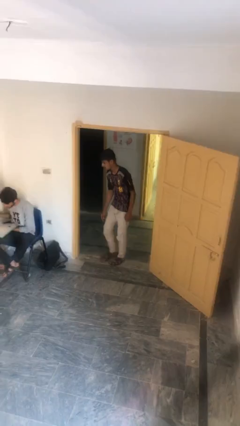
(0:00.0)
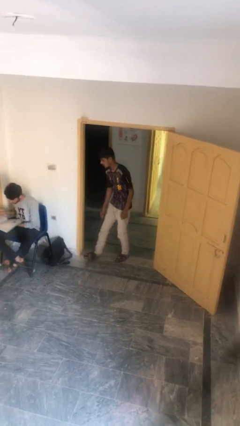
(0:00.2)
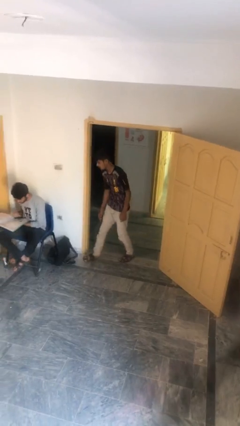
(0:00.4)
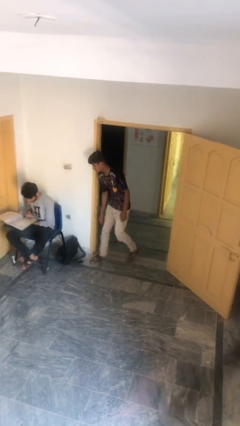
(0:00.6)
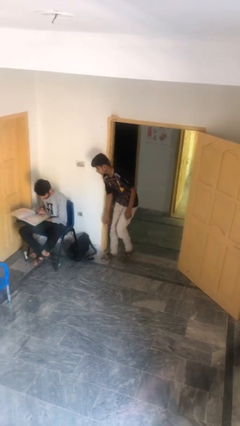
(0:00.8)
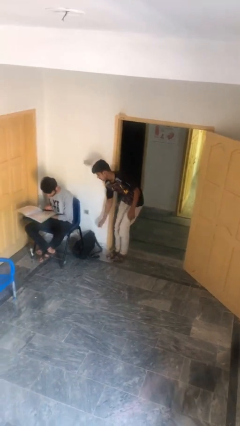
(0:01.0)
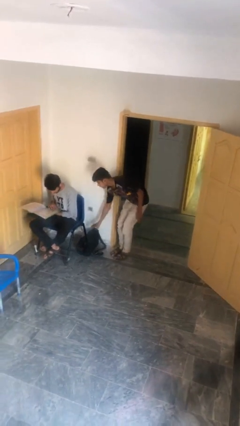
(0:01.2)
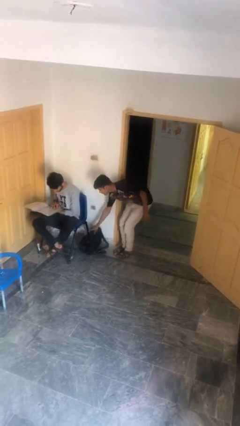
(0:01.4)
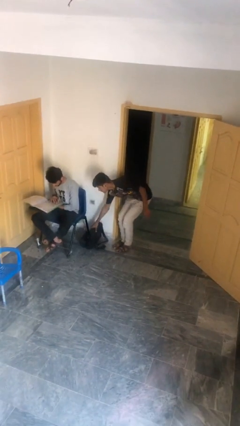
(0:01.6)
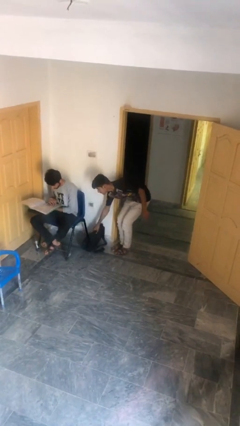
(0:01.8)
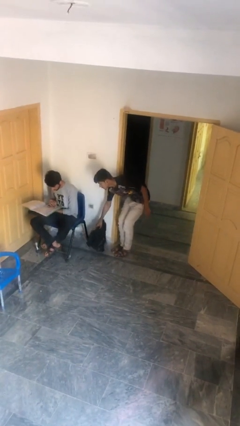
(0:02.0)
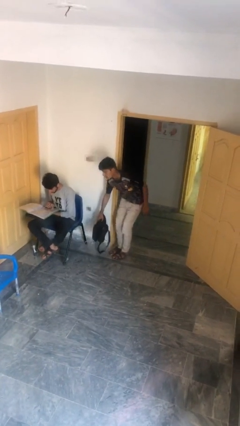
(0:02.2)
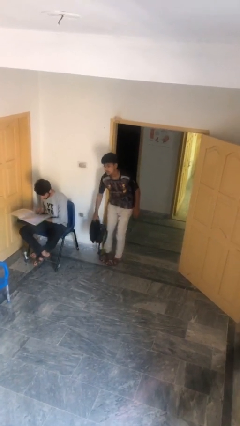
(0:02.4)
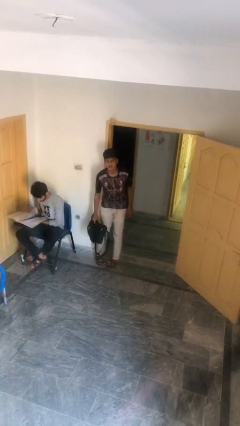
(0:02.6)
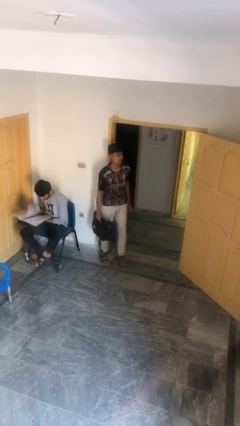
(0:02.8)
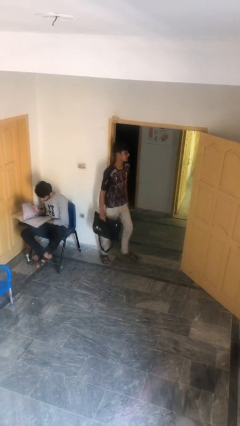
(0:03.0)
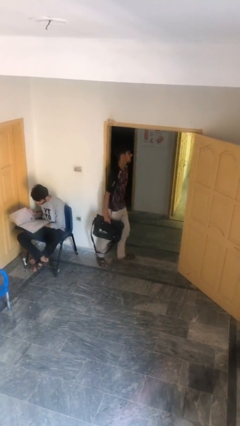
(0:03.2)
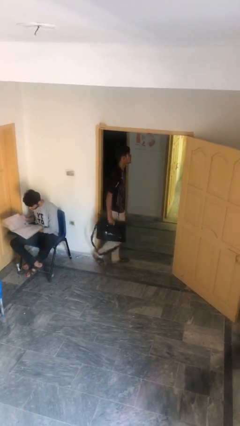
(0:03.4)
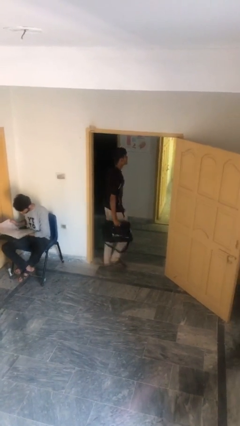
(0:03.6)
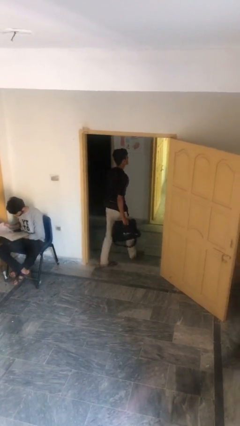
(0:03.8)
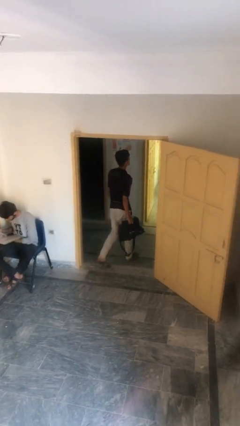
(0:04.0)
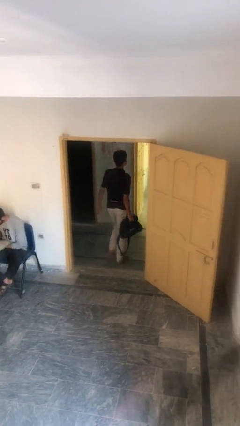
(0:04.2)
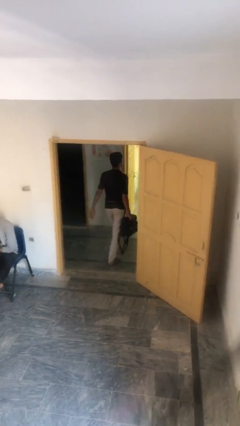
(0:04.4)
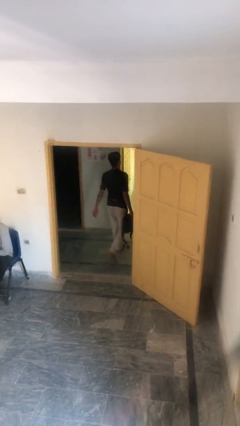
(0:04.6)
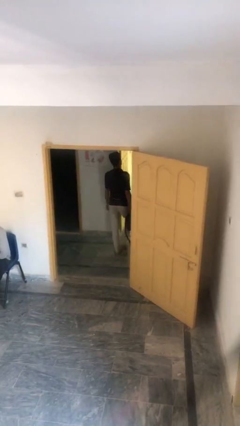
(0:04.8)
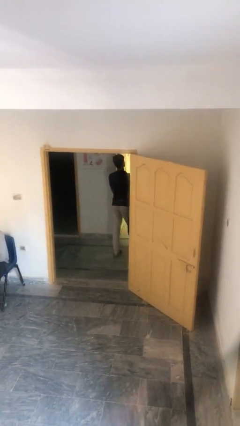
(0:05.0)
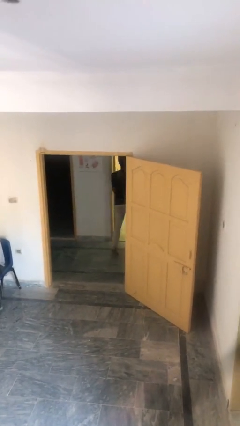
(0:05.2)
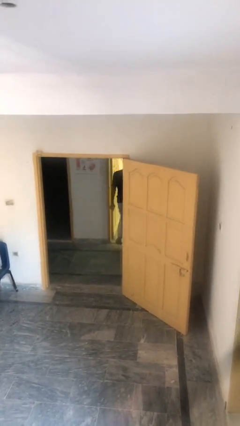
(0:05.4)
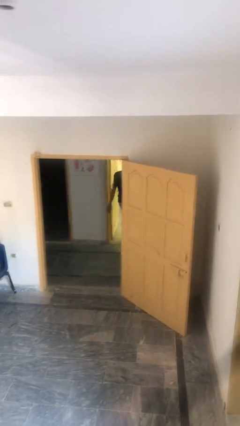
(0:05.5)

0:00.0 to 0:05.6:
person steals object from person

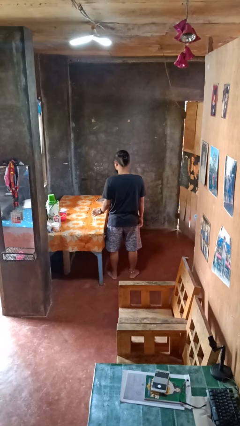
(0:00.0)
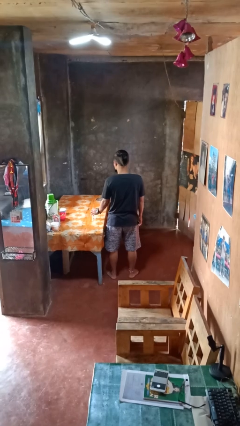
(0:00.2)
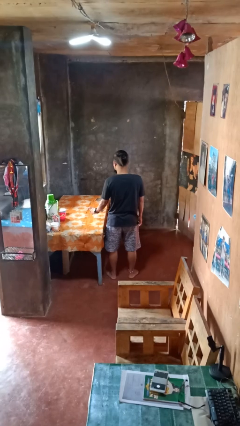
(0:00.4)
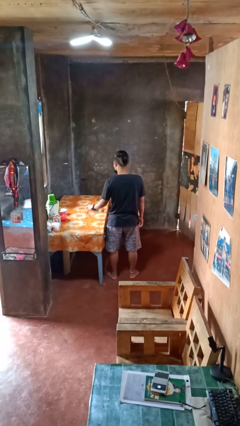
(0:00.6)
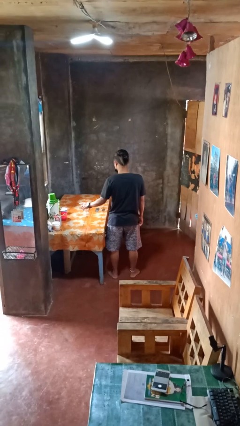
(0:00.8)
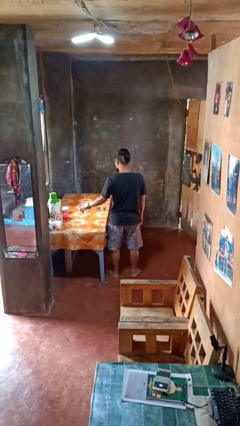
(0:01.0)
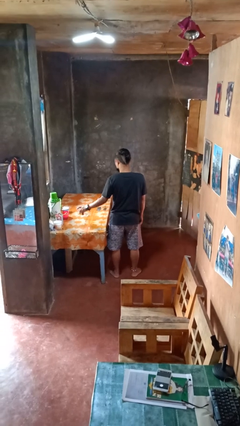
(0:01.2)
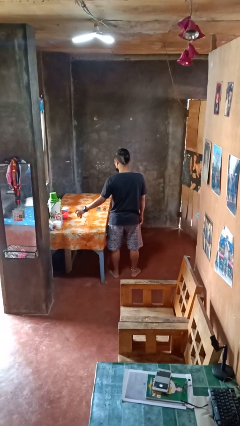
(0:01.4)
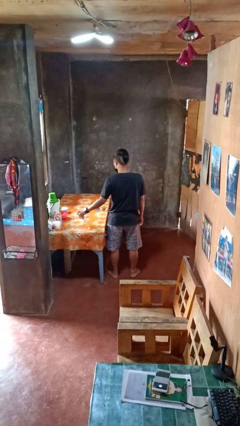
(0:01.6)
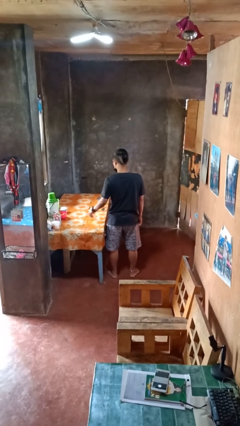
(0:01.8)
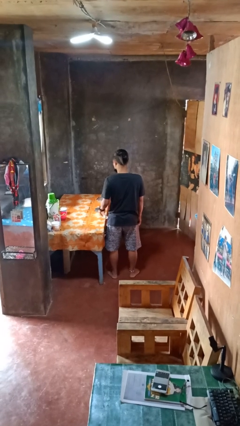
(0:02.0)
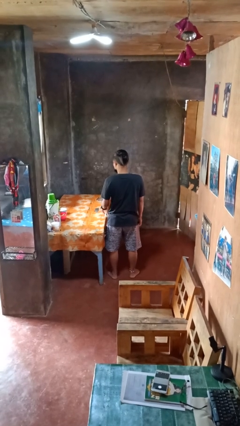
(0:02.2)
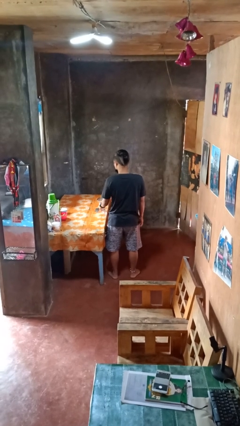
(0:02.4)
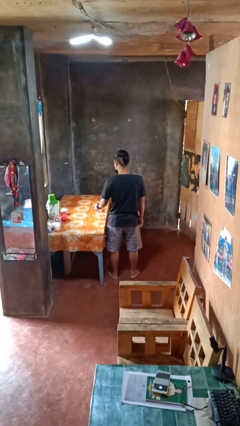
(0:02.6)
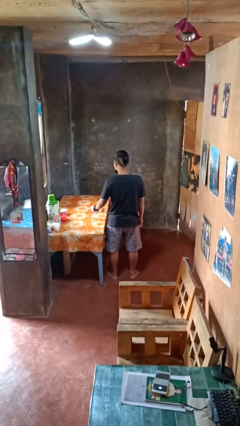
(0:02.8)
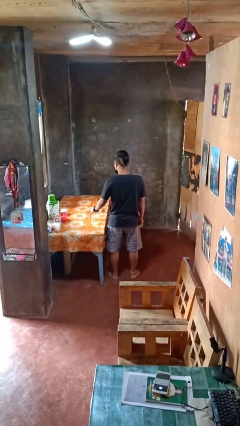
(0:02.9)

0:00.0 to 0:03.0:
person sprays from bottle

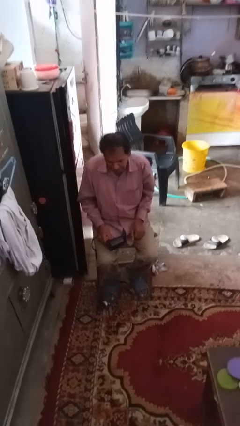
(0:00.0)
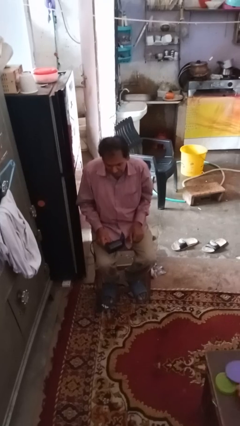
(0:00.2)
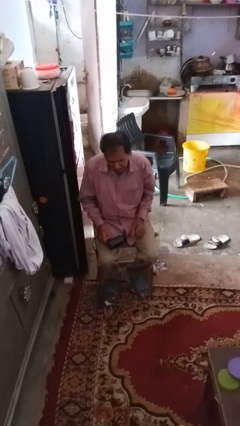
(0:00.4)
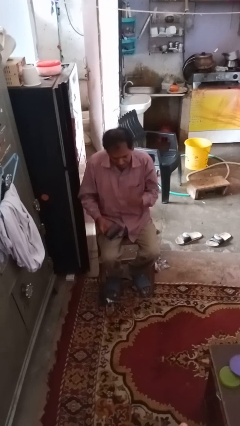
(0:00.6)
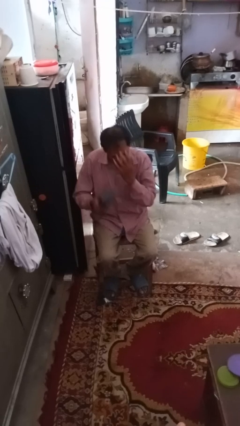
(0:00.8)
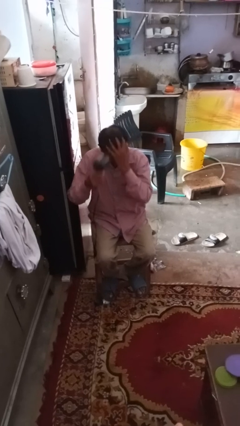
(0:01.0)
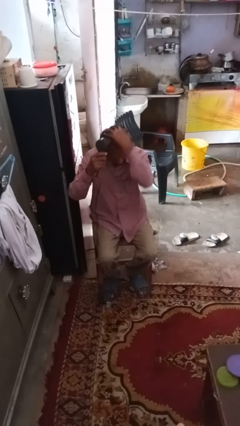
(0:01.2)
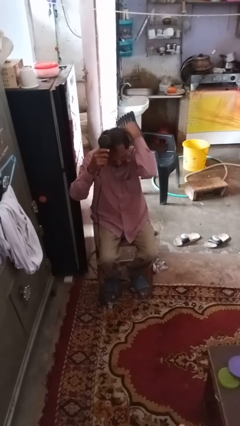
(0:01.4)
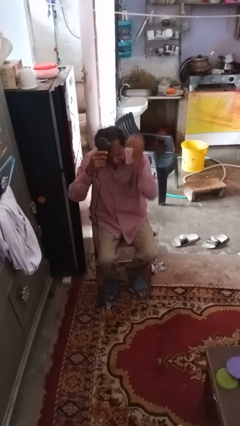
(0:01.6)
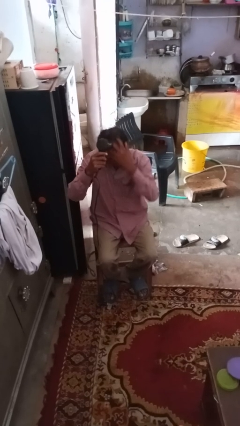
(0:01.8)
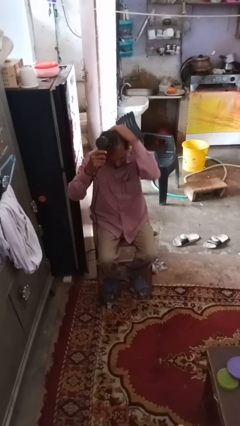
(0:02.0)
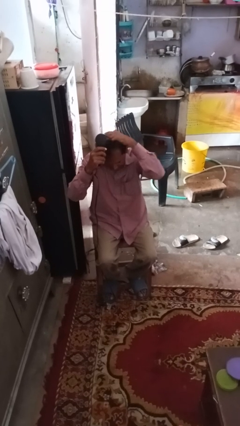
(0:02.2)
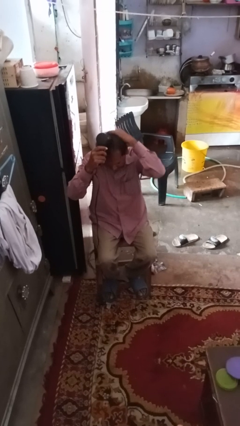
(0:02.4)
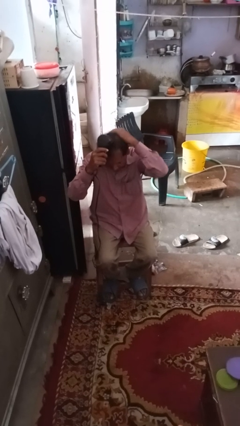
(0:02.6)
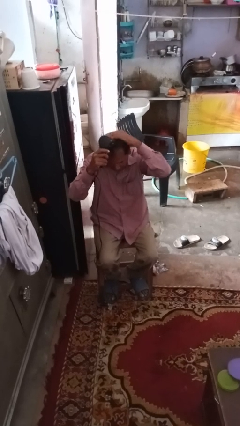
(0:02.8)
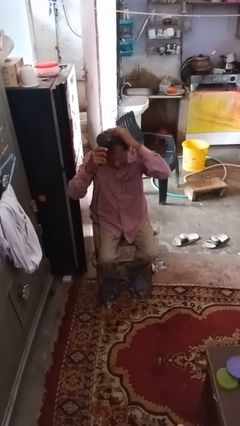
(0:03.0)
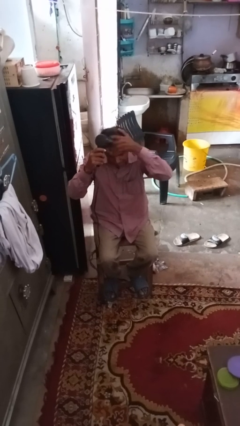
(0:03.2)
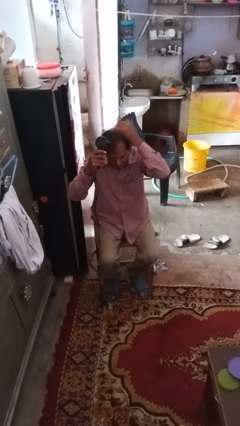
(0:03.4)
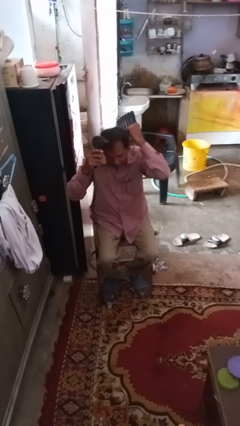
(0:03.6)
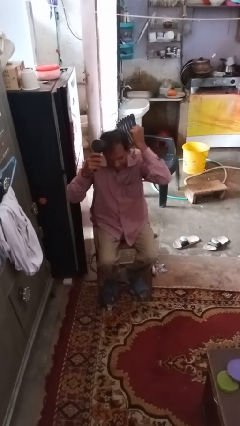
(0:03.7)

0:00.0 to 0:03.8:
person dries hair with hairdryer

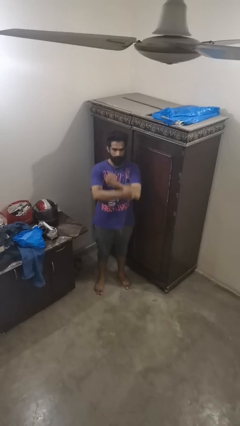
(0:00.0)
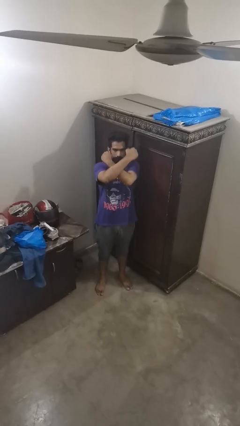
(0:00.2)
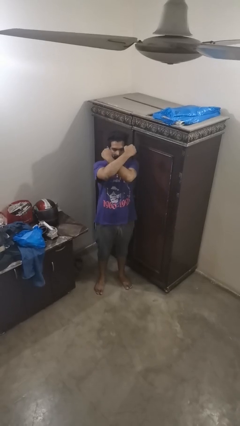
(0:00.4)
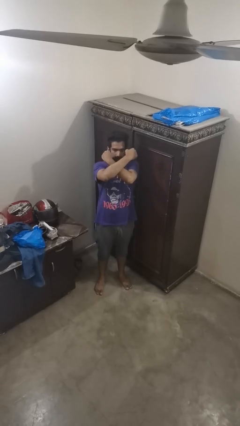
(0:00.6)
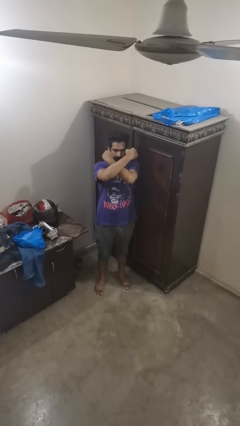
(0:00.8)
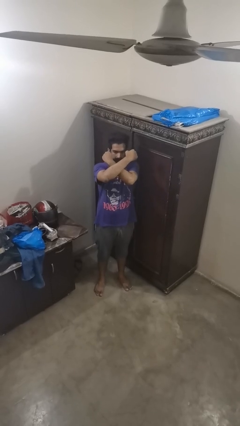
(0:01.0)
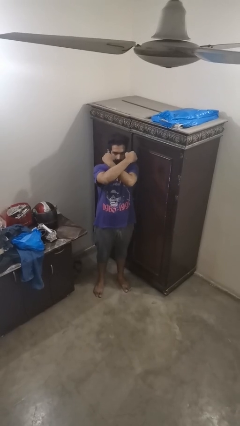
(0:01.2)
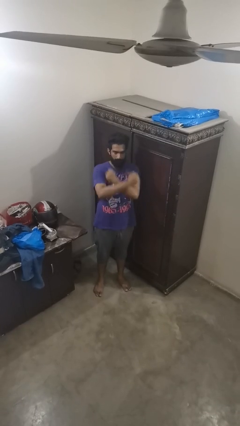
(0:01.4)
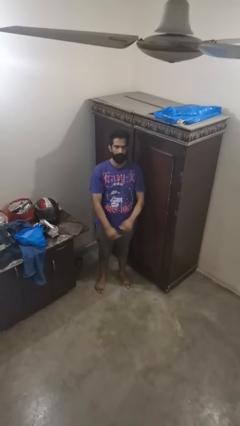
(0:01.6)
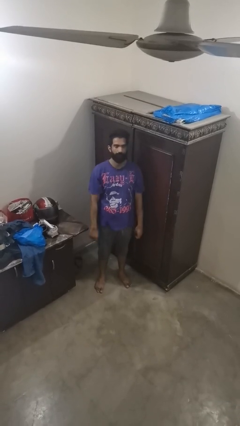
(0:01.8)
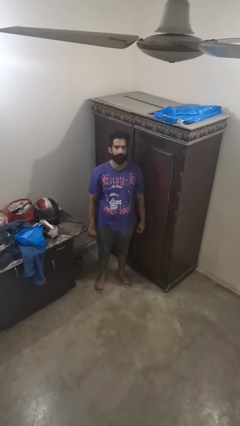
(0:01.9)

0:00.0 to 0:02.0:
person gestures arms x

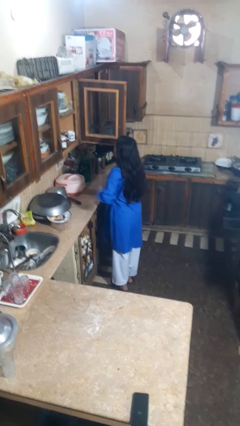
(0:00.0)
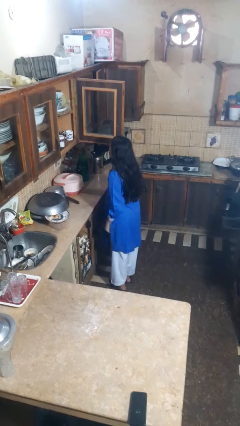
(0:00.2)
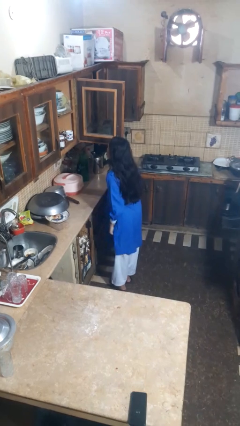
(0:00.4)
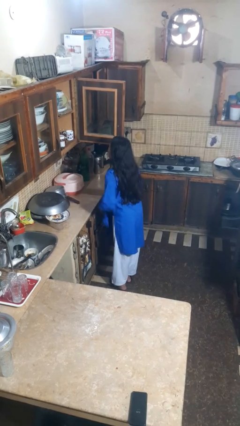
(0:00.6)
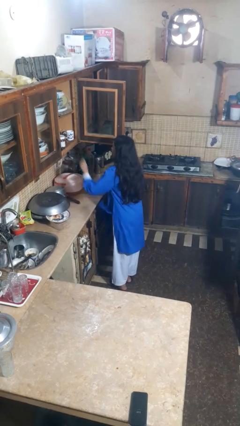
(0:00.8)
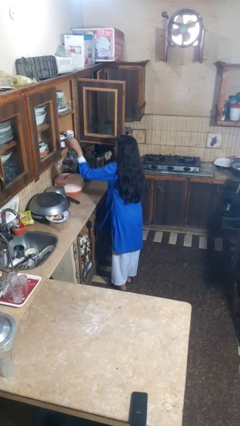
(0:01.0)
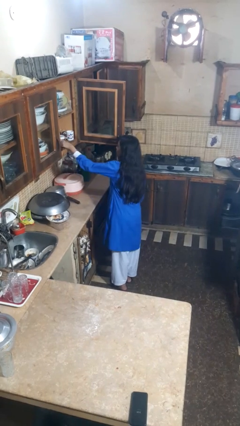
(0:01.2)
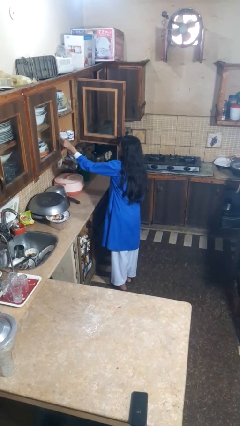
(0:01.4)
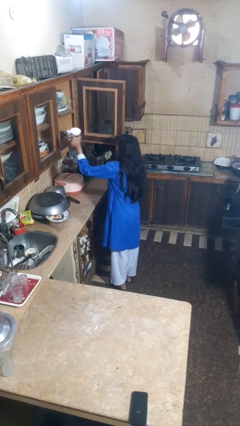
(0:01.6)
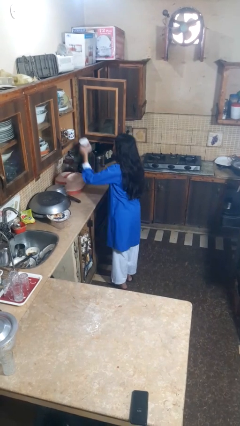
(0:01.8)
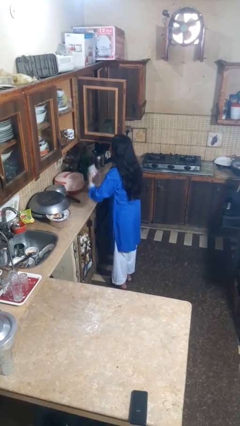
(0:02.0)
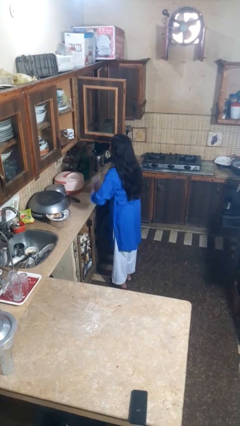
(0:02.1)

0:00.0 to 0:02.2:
person takes object from cabinet

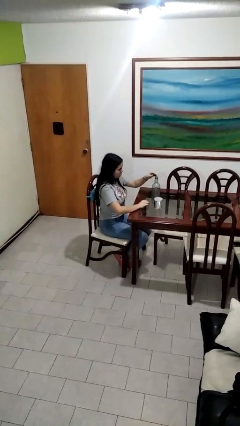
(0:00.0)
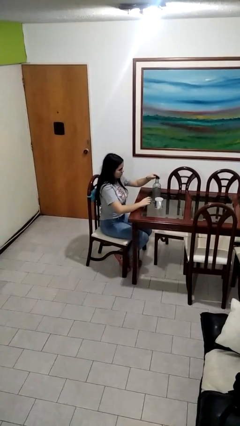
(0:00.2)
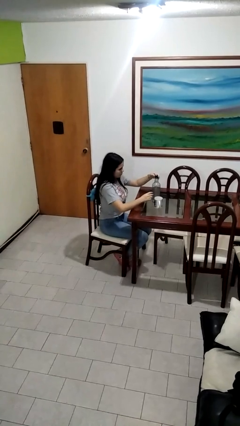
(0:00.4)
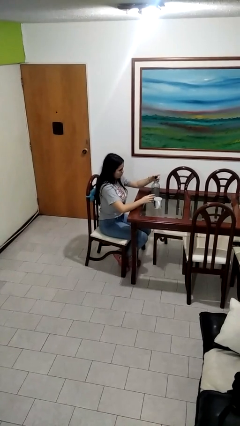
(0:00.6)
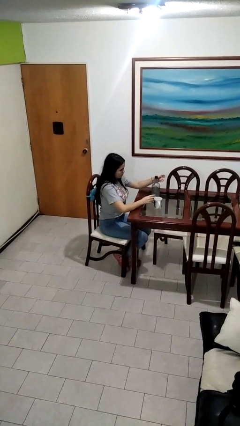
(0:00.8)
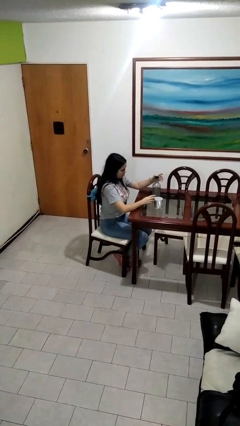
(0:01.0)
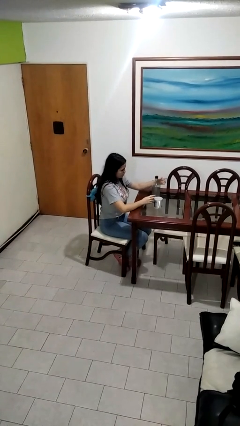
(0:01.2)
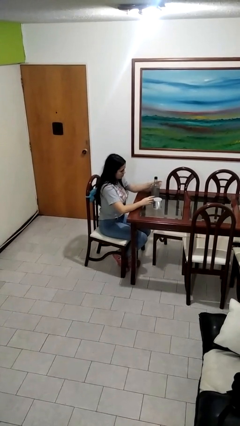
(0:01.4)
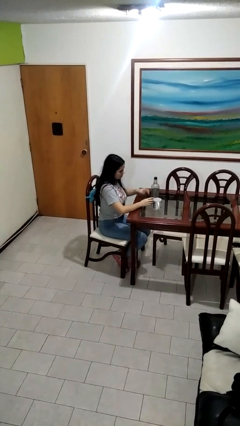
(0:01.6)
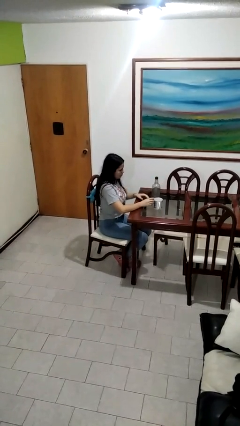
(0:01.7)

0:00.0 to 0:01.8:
person screws lid to bottle
